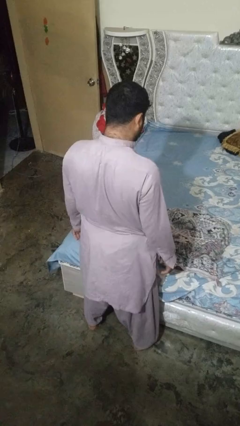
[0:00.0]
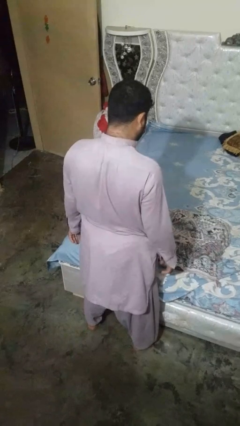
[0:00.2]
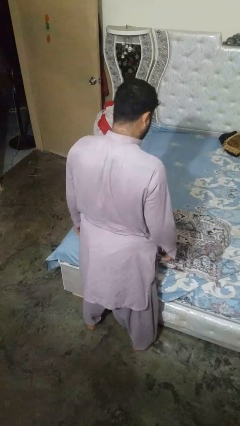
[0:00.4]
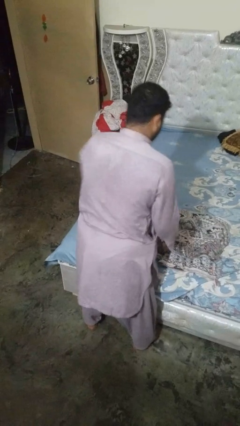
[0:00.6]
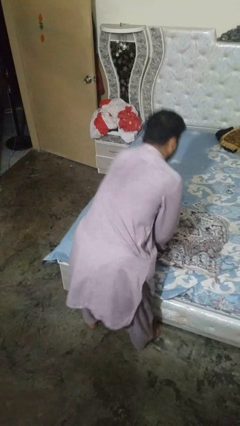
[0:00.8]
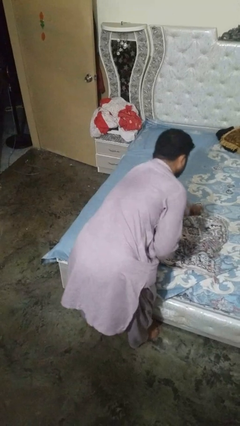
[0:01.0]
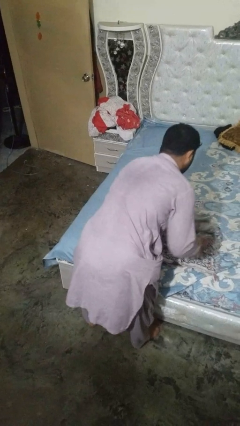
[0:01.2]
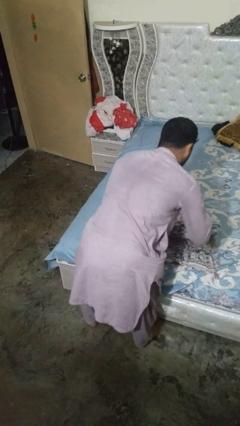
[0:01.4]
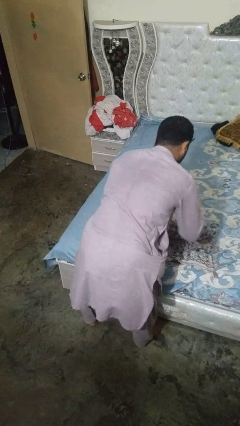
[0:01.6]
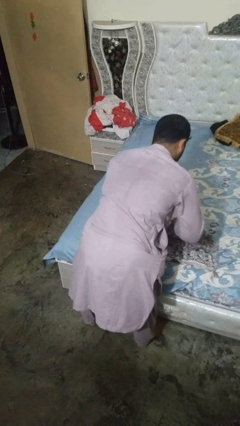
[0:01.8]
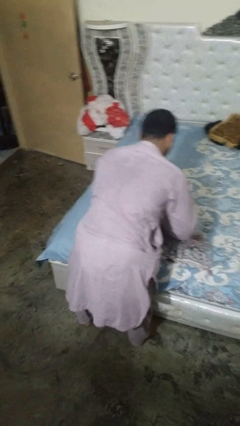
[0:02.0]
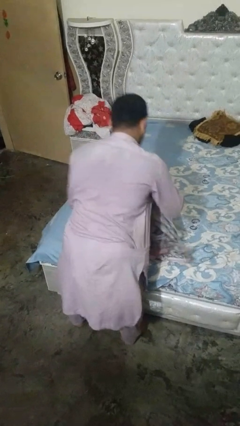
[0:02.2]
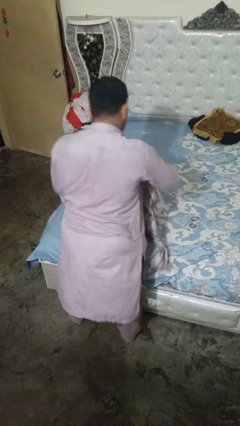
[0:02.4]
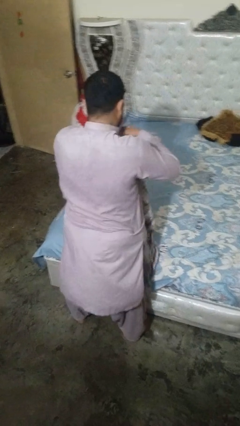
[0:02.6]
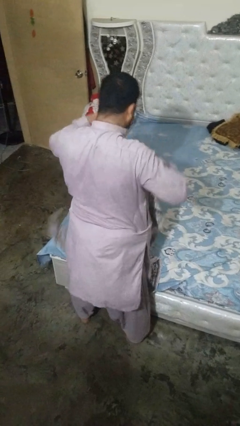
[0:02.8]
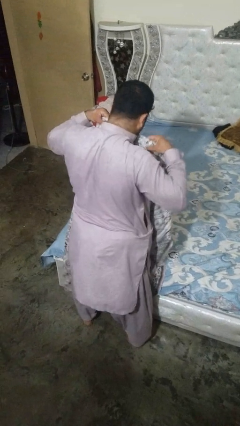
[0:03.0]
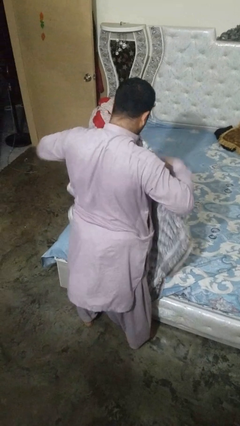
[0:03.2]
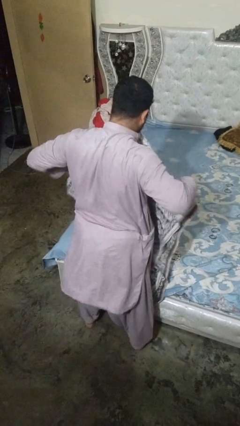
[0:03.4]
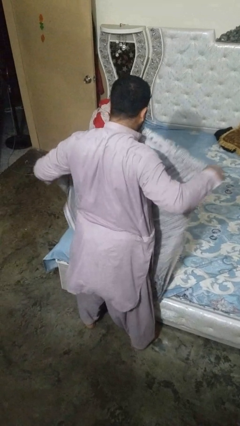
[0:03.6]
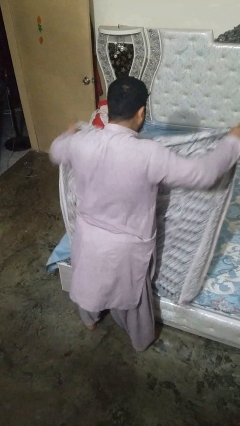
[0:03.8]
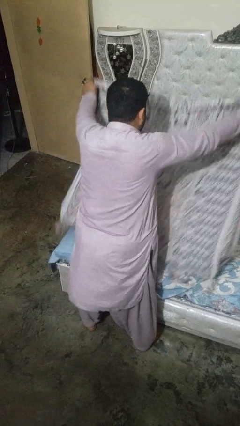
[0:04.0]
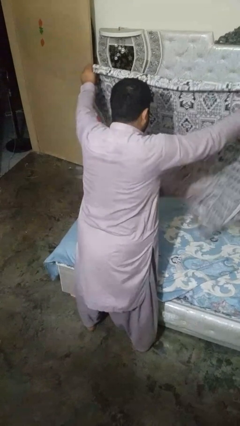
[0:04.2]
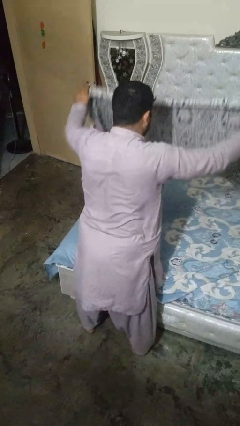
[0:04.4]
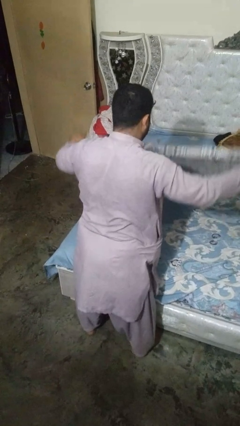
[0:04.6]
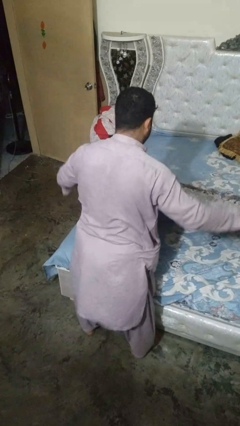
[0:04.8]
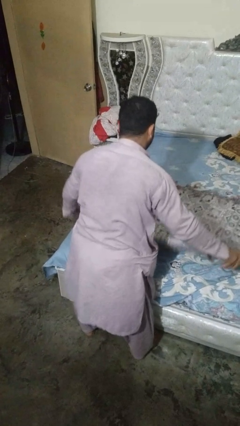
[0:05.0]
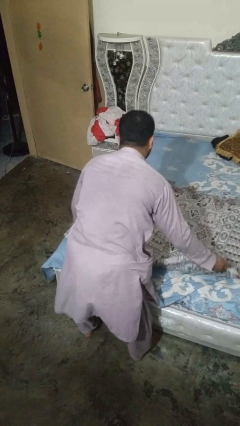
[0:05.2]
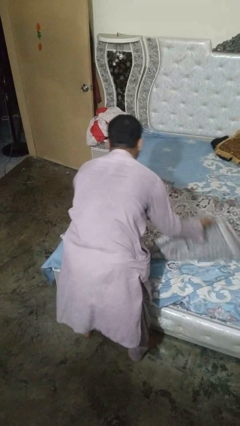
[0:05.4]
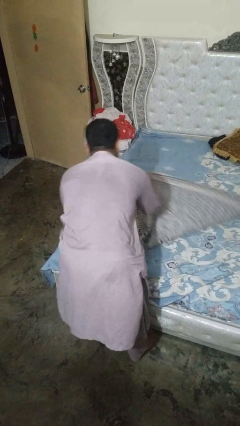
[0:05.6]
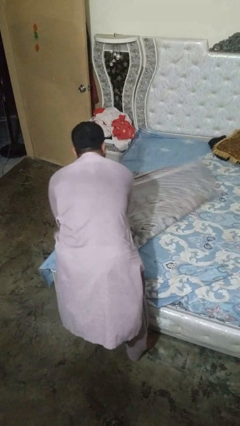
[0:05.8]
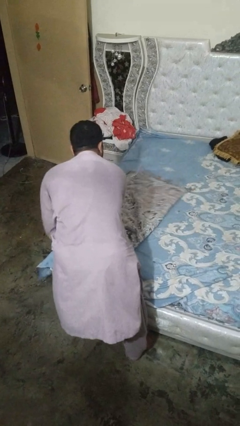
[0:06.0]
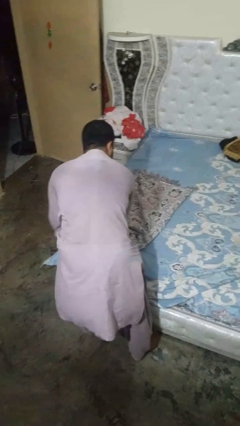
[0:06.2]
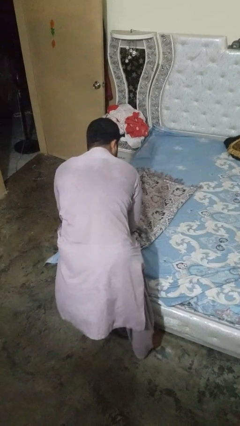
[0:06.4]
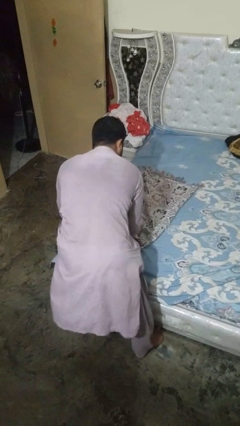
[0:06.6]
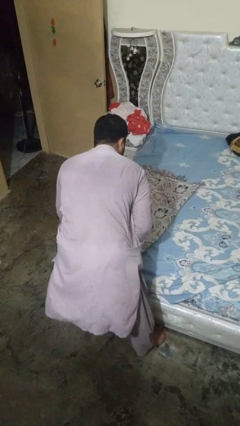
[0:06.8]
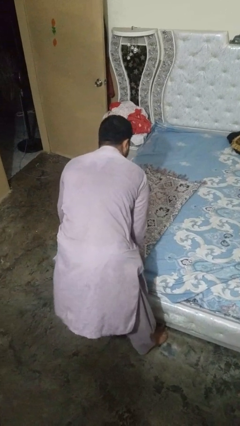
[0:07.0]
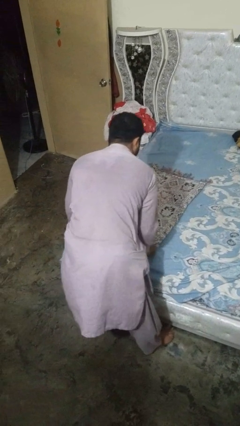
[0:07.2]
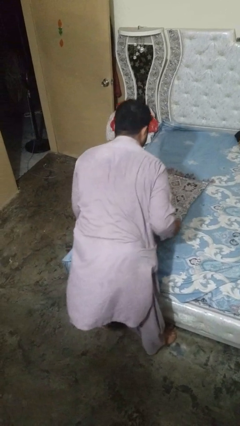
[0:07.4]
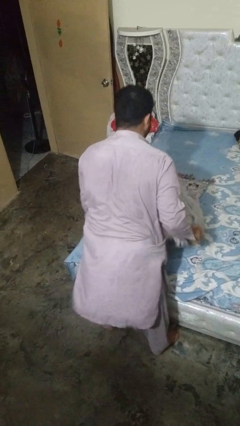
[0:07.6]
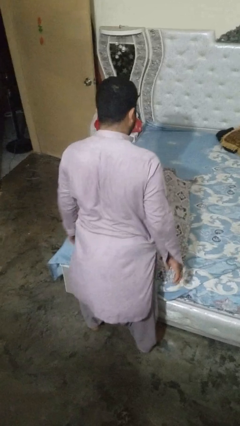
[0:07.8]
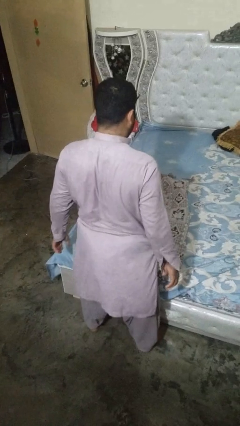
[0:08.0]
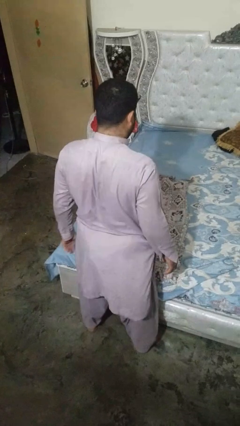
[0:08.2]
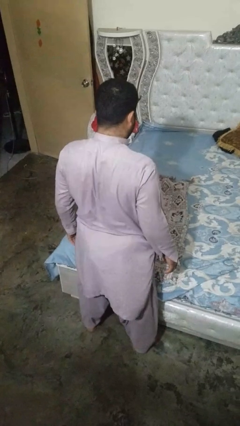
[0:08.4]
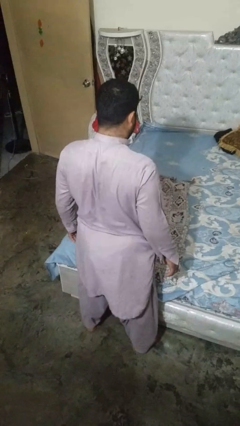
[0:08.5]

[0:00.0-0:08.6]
person folds blanket

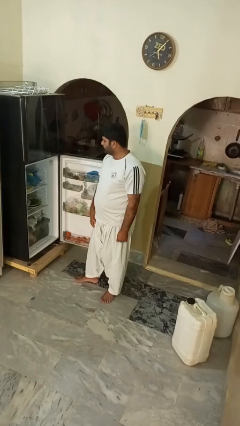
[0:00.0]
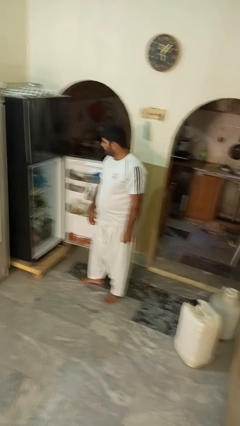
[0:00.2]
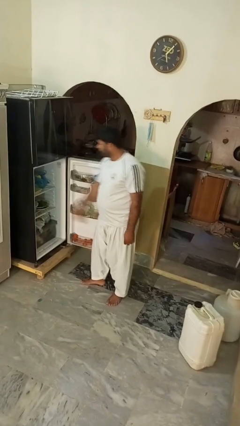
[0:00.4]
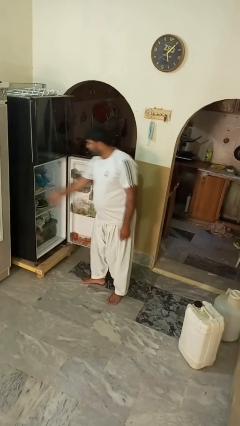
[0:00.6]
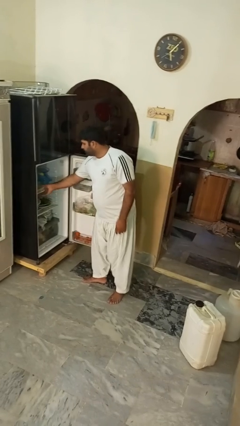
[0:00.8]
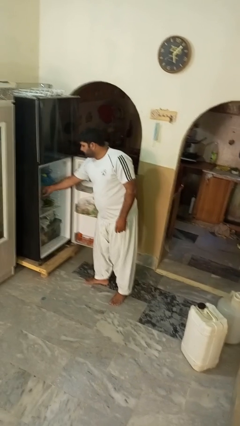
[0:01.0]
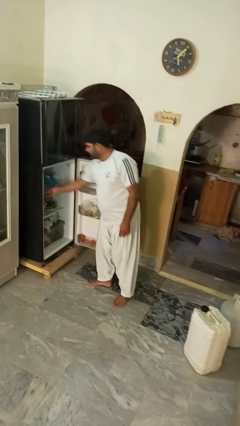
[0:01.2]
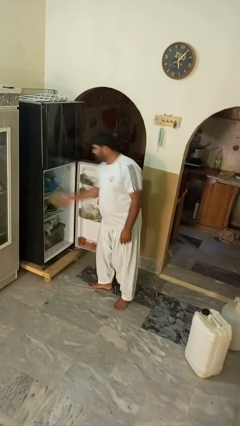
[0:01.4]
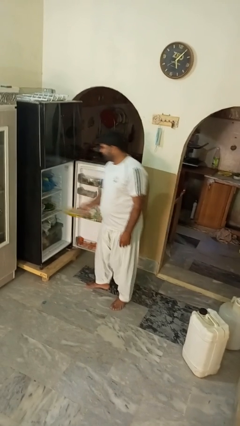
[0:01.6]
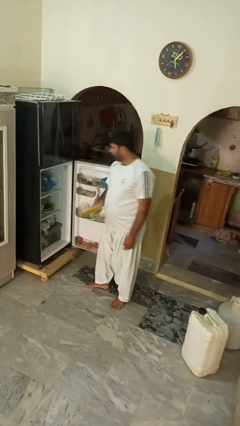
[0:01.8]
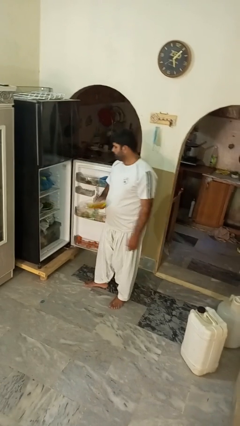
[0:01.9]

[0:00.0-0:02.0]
person takes object from refrigerator

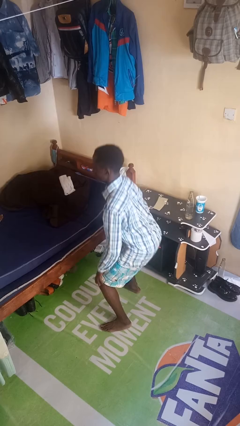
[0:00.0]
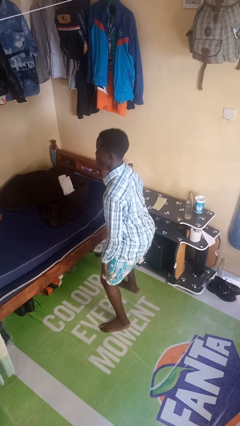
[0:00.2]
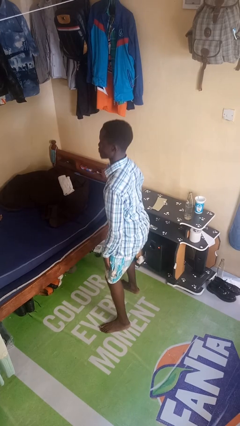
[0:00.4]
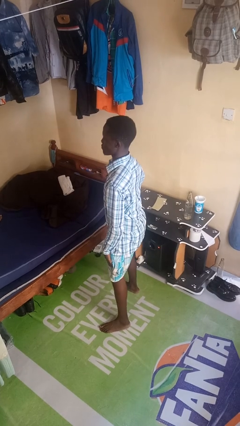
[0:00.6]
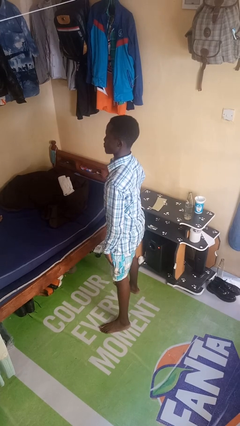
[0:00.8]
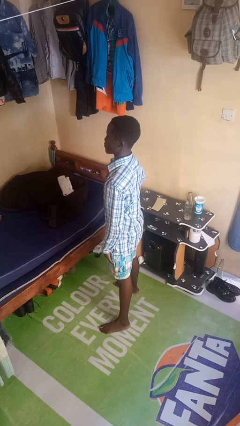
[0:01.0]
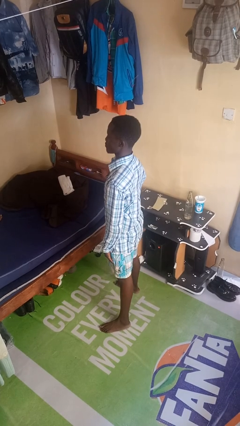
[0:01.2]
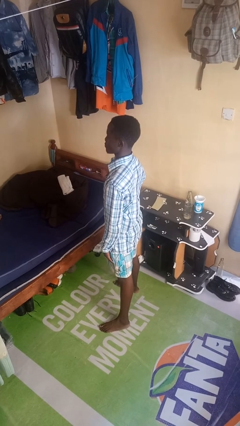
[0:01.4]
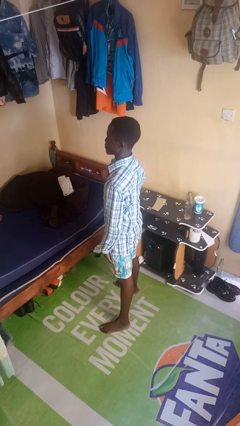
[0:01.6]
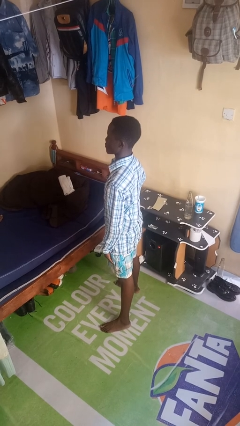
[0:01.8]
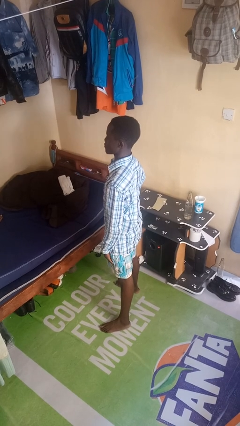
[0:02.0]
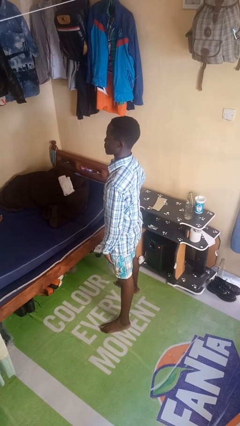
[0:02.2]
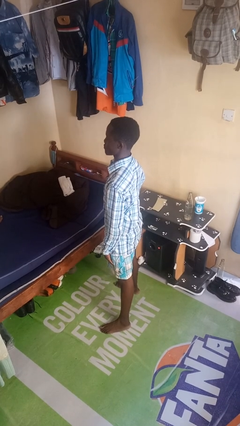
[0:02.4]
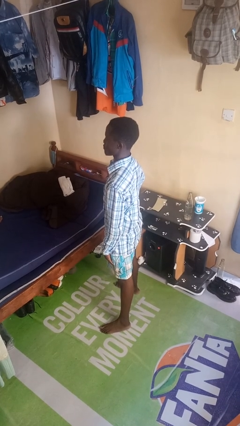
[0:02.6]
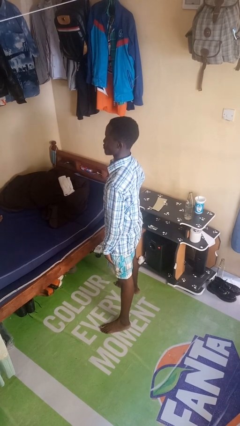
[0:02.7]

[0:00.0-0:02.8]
person stands up

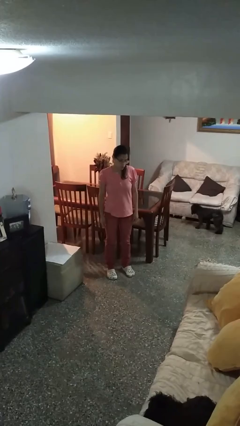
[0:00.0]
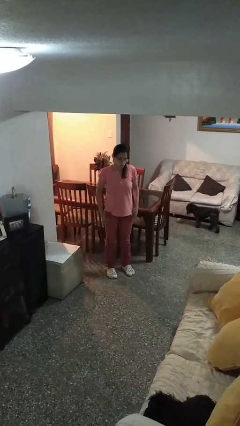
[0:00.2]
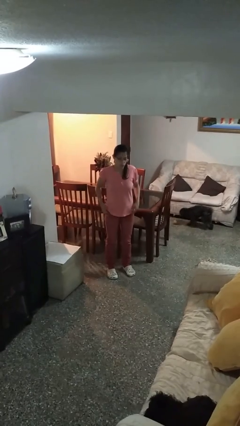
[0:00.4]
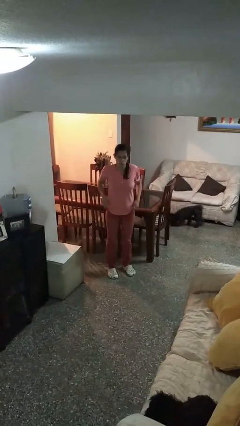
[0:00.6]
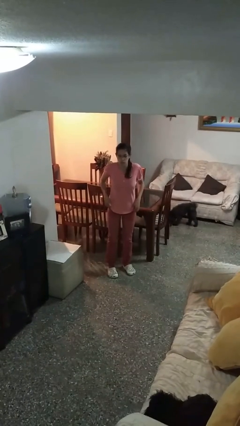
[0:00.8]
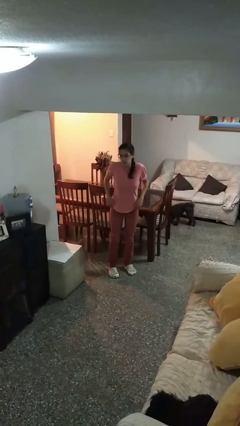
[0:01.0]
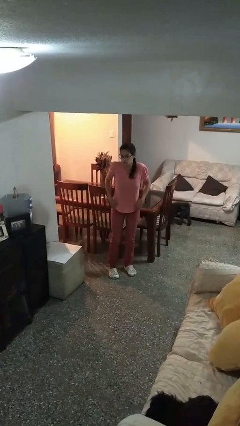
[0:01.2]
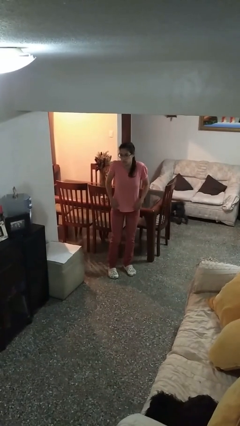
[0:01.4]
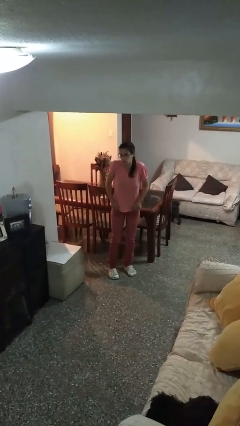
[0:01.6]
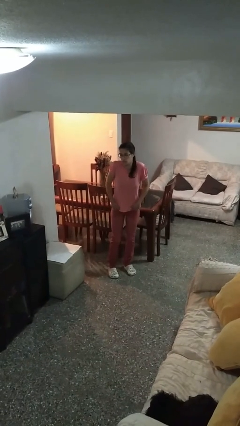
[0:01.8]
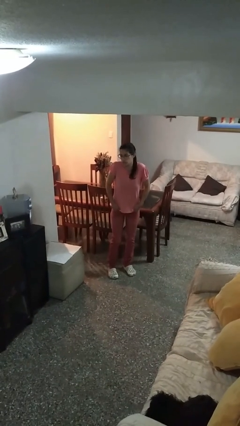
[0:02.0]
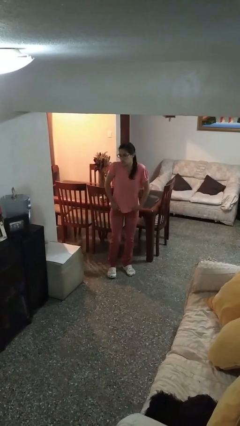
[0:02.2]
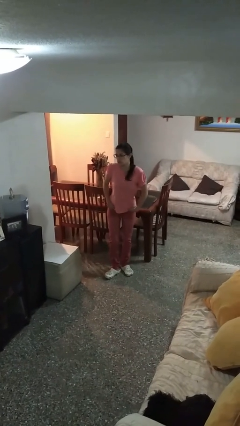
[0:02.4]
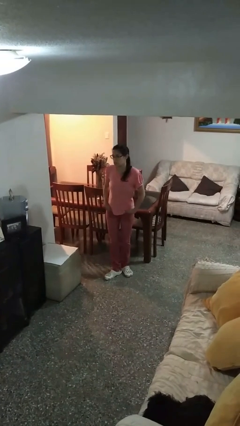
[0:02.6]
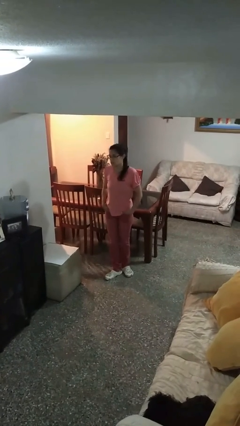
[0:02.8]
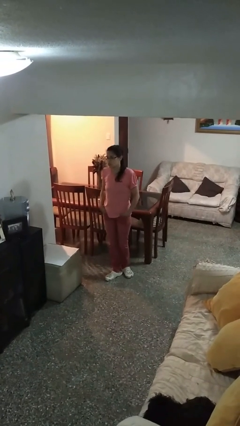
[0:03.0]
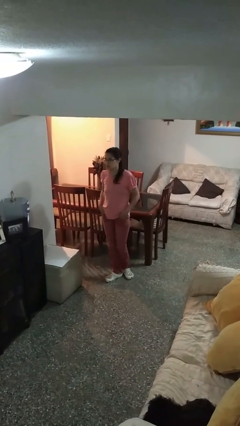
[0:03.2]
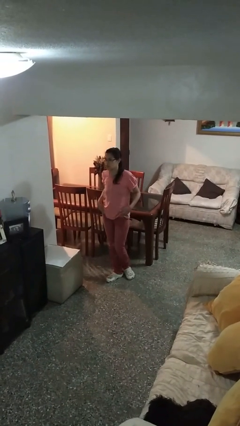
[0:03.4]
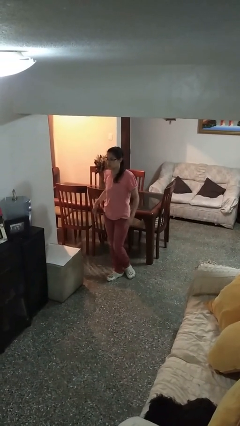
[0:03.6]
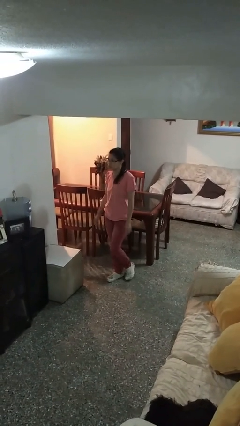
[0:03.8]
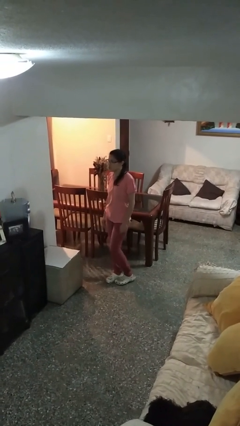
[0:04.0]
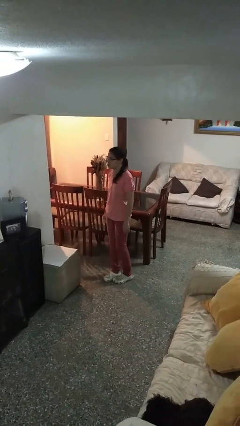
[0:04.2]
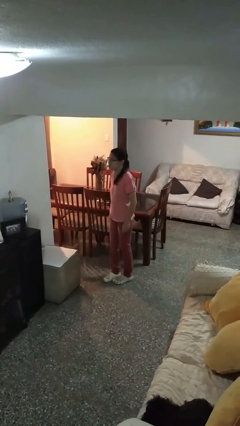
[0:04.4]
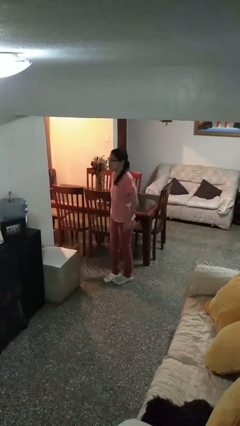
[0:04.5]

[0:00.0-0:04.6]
person puts hands in back pockets
